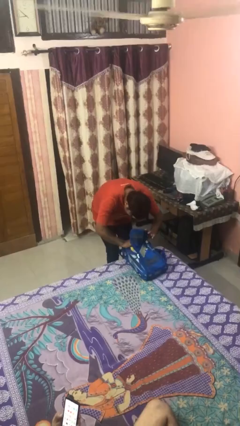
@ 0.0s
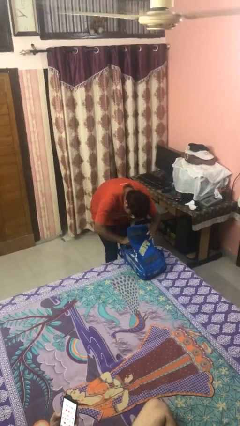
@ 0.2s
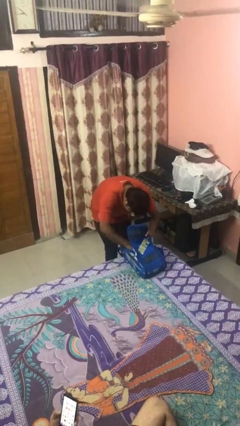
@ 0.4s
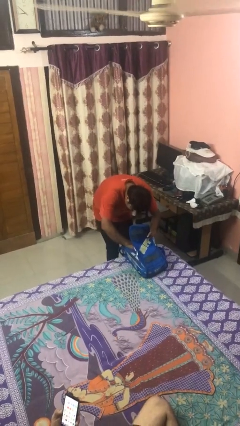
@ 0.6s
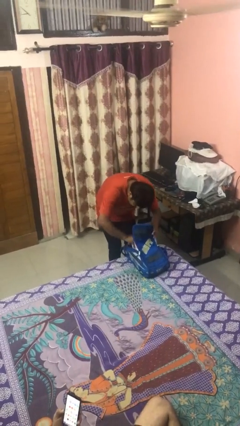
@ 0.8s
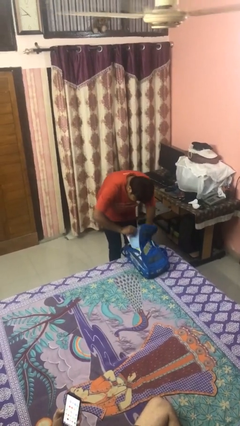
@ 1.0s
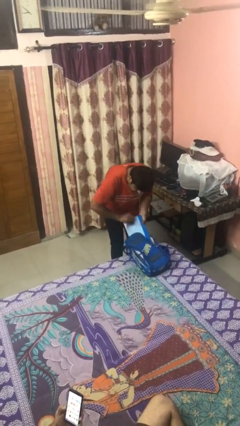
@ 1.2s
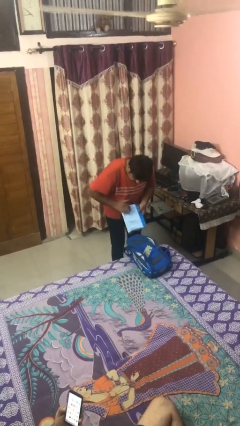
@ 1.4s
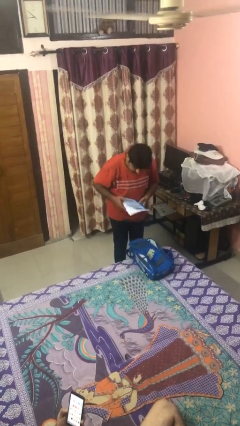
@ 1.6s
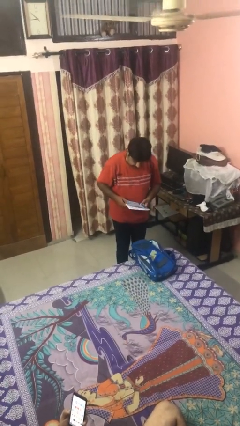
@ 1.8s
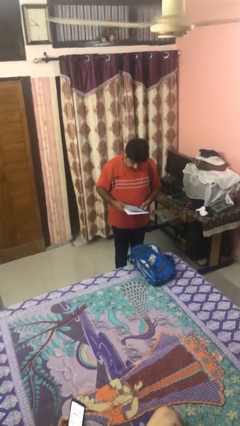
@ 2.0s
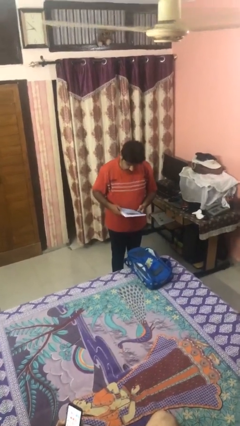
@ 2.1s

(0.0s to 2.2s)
person takes object from backpack

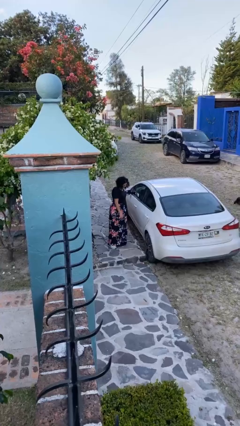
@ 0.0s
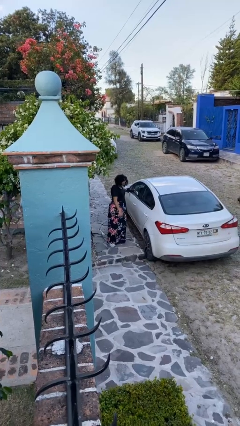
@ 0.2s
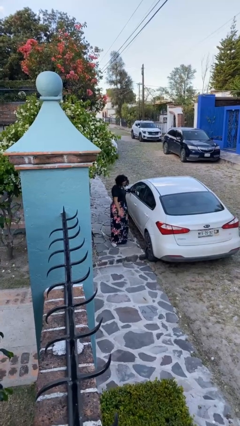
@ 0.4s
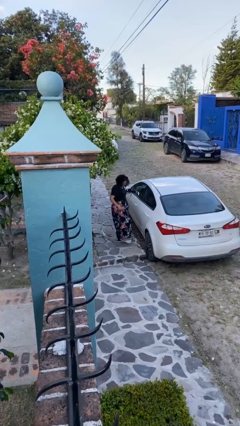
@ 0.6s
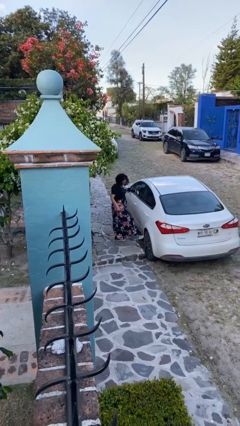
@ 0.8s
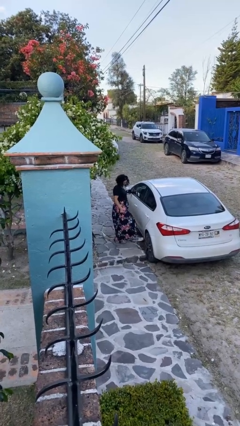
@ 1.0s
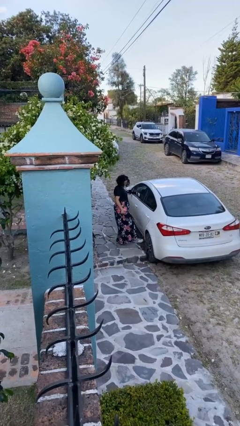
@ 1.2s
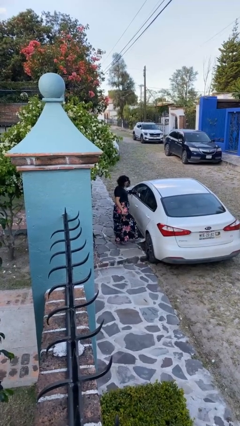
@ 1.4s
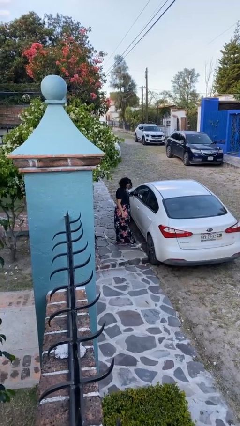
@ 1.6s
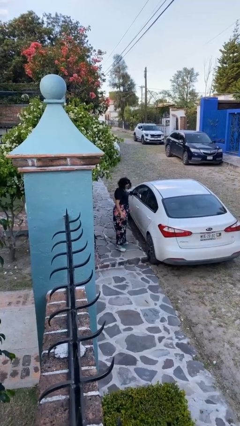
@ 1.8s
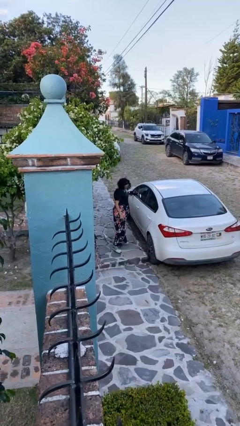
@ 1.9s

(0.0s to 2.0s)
person kicks car tires

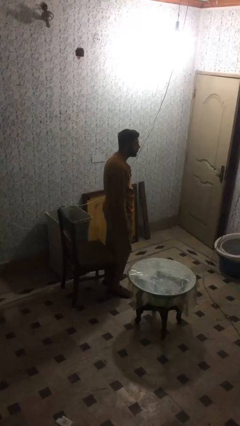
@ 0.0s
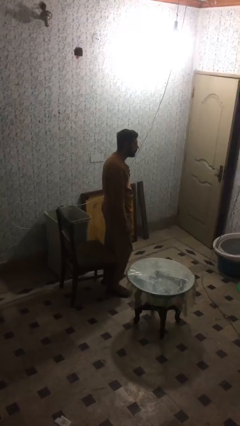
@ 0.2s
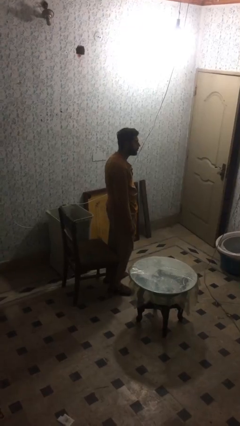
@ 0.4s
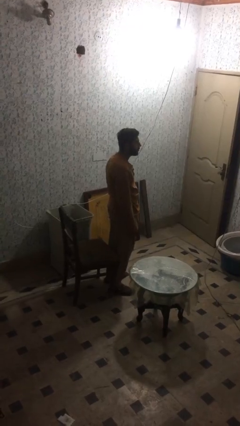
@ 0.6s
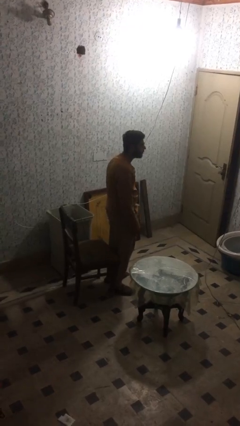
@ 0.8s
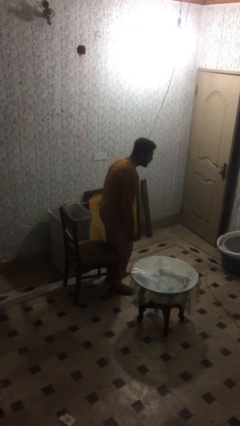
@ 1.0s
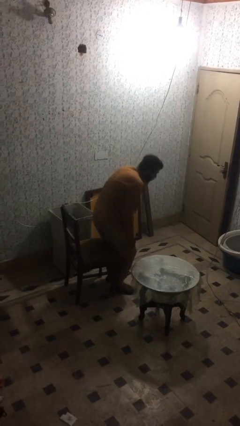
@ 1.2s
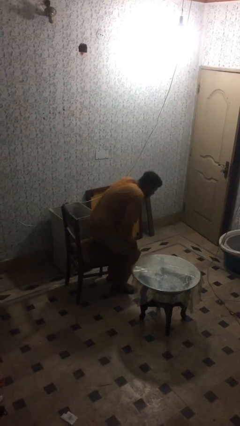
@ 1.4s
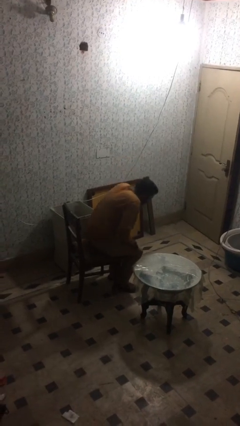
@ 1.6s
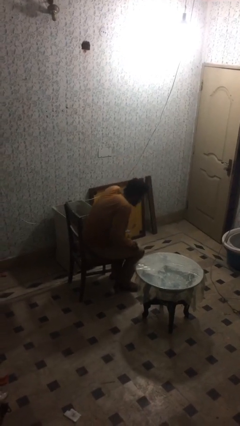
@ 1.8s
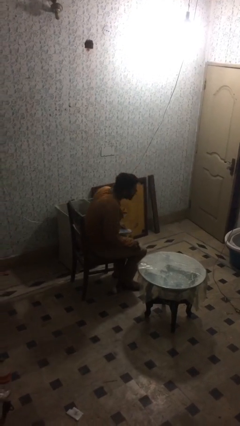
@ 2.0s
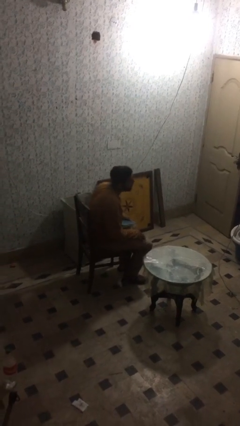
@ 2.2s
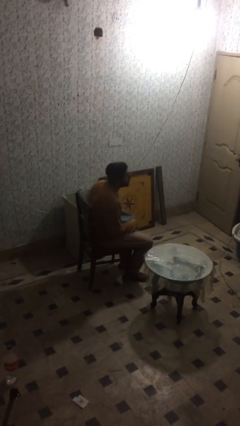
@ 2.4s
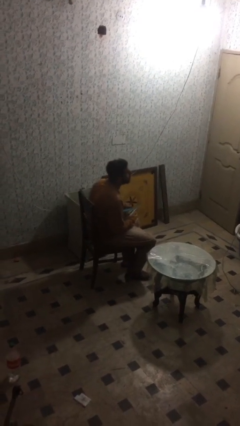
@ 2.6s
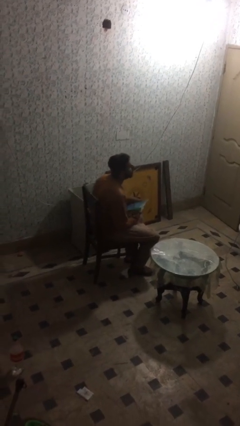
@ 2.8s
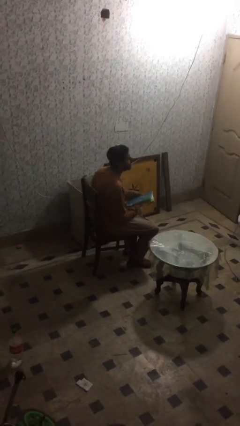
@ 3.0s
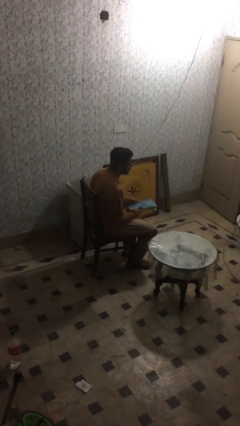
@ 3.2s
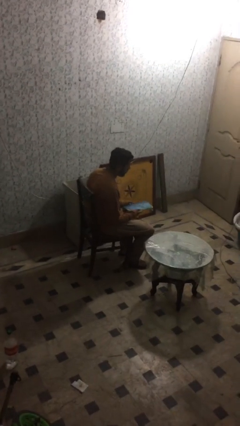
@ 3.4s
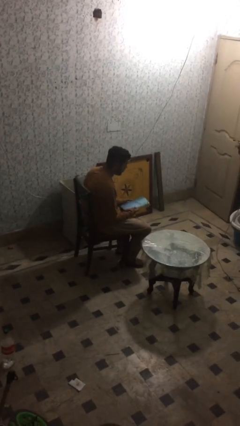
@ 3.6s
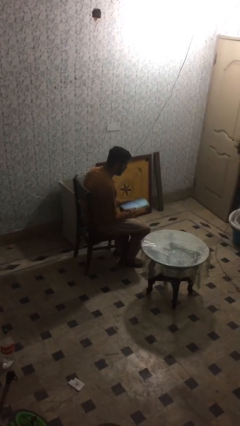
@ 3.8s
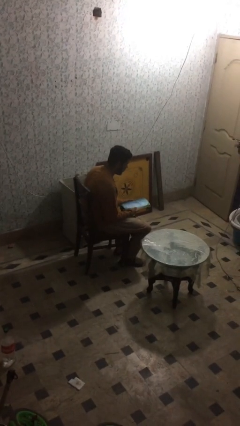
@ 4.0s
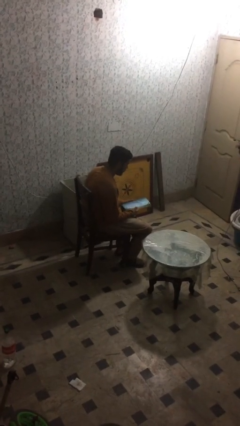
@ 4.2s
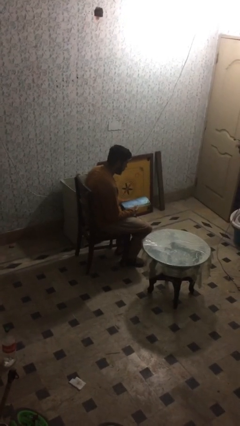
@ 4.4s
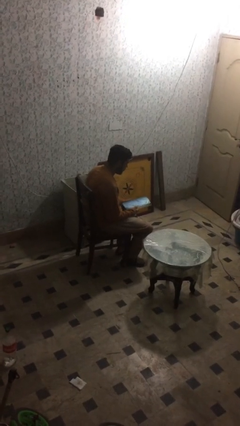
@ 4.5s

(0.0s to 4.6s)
person sits down

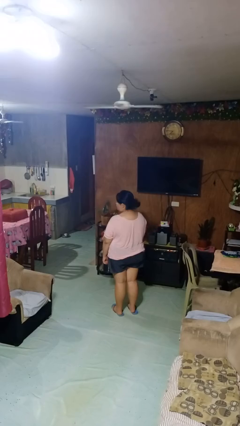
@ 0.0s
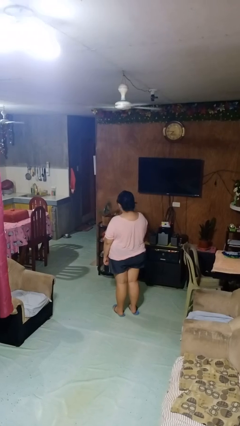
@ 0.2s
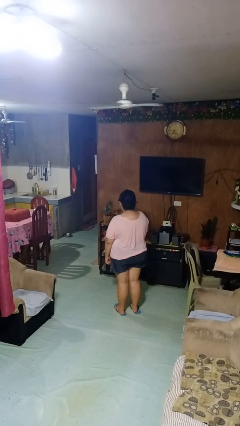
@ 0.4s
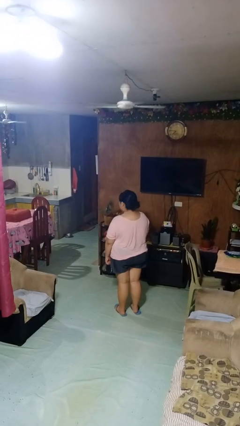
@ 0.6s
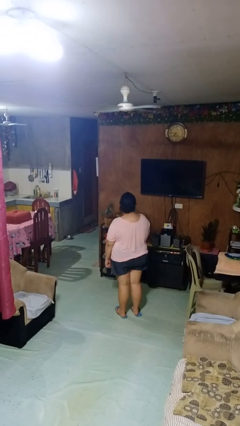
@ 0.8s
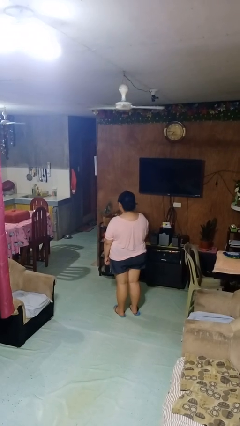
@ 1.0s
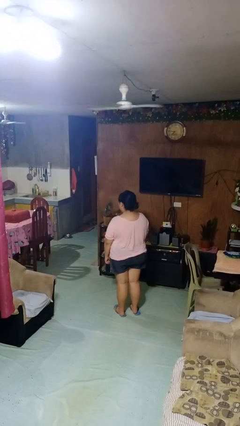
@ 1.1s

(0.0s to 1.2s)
person shakes head

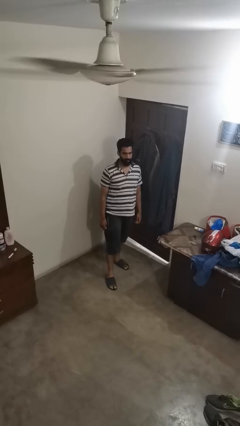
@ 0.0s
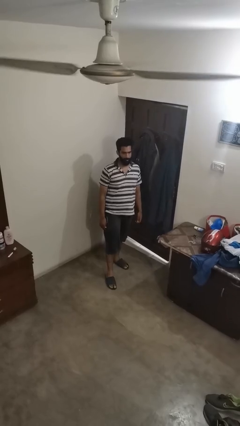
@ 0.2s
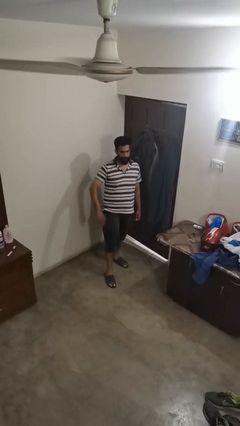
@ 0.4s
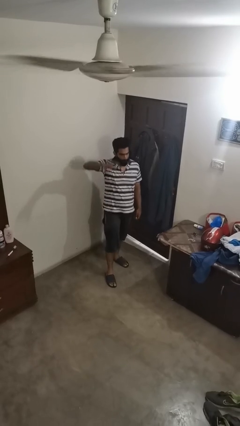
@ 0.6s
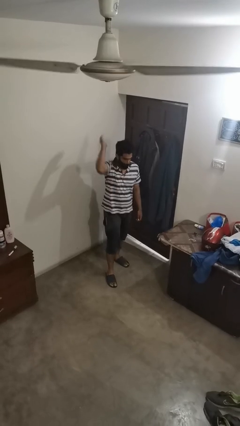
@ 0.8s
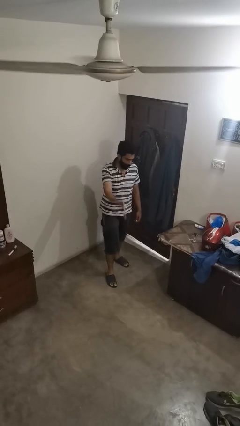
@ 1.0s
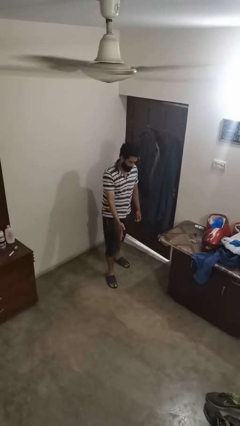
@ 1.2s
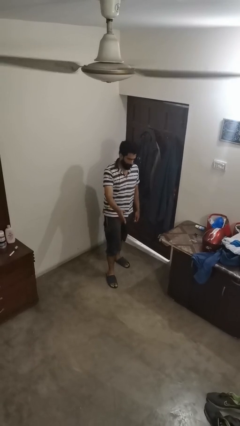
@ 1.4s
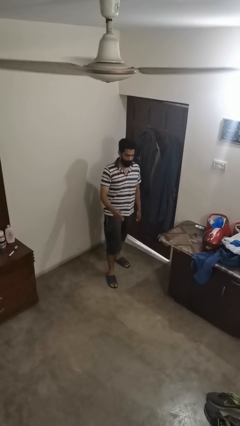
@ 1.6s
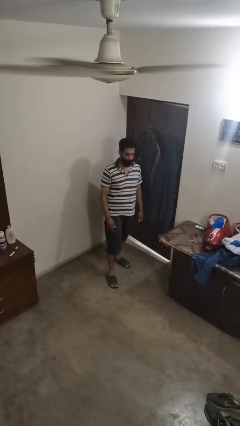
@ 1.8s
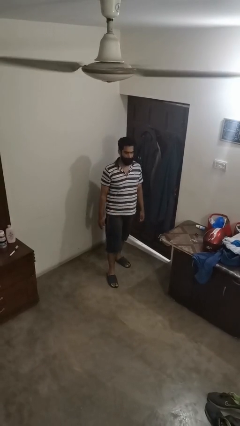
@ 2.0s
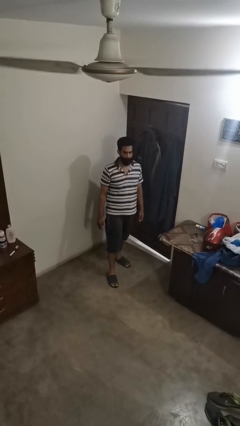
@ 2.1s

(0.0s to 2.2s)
person karate chop

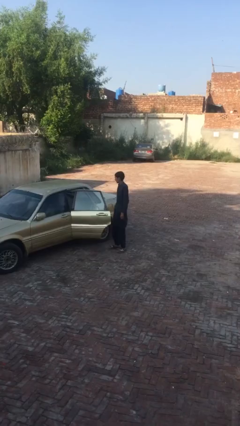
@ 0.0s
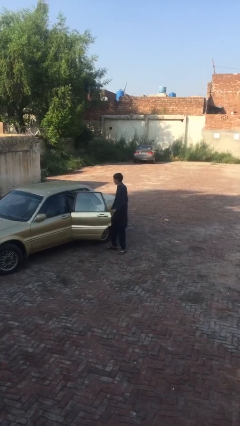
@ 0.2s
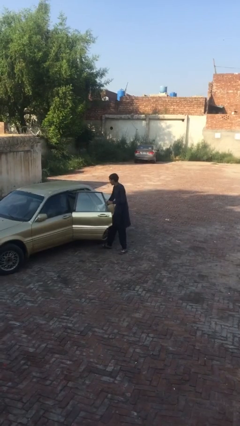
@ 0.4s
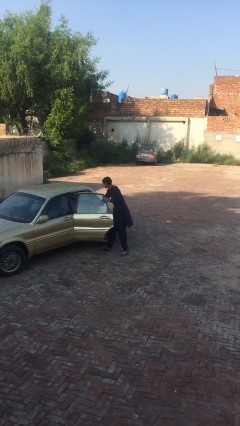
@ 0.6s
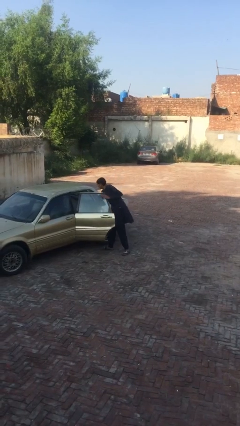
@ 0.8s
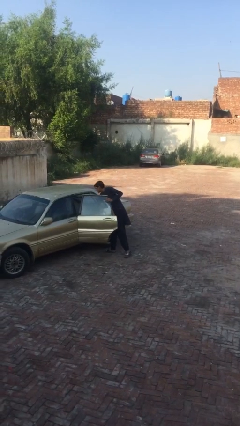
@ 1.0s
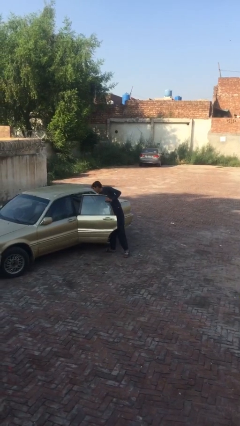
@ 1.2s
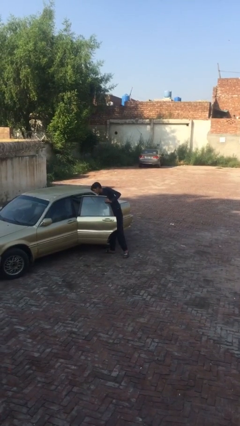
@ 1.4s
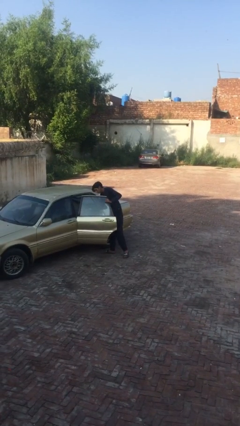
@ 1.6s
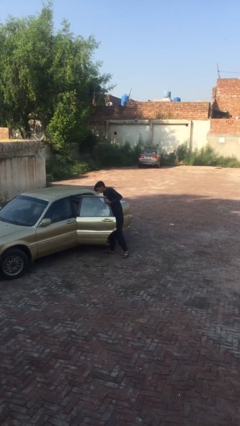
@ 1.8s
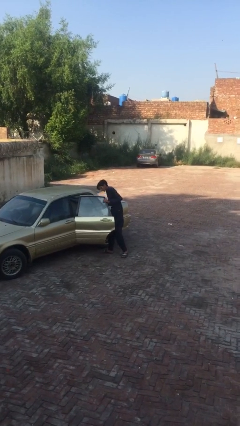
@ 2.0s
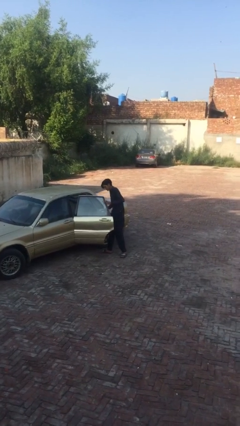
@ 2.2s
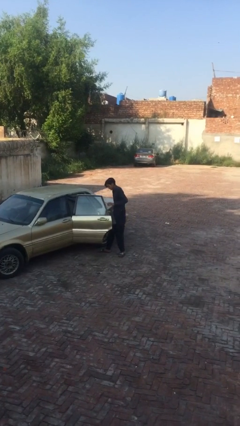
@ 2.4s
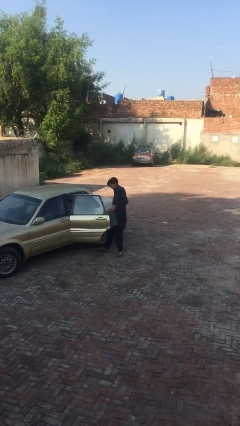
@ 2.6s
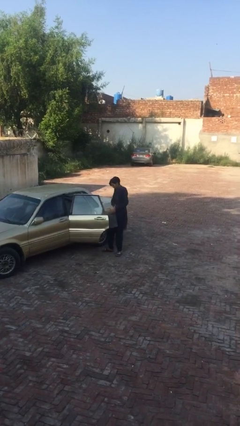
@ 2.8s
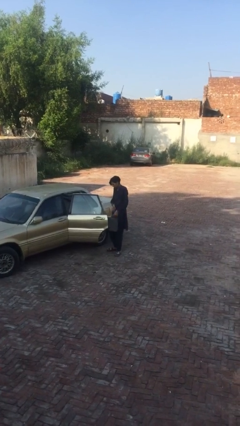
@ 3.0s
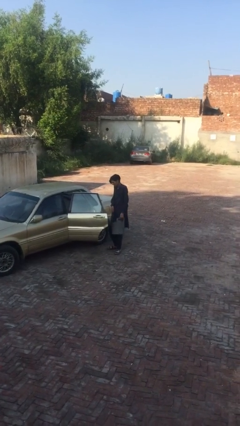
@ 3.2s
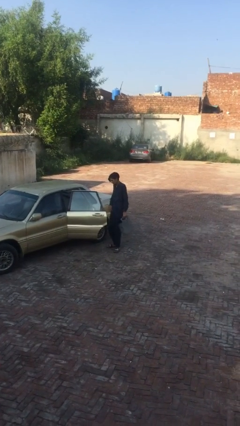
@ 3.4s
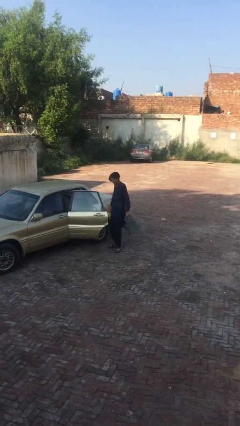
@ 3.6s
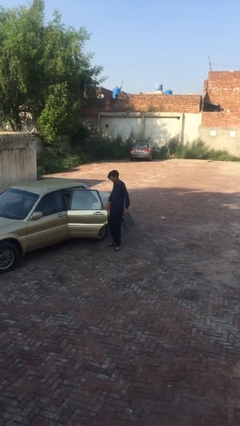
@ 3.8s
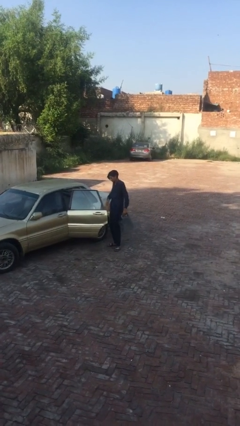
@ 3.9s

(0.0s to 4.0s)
person unloads car

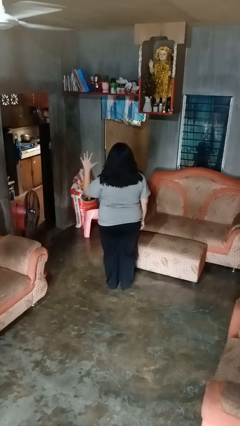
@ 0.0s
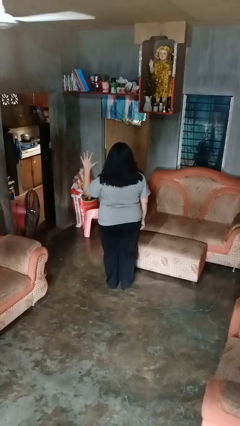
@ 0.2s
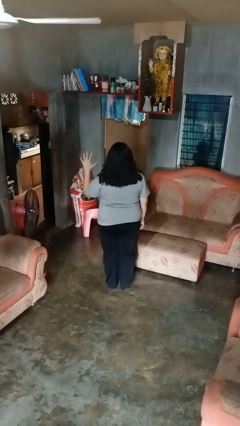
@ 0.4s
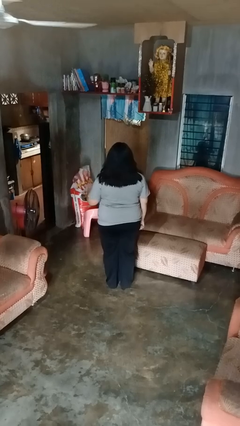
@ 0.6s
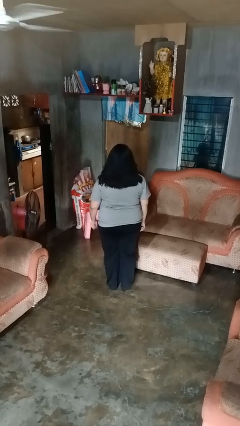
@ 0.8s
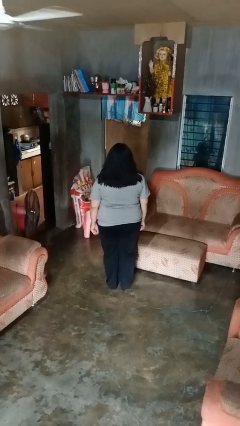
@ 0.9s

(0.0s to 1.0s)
person gestures number five
